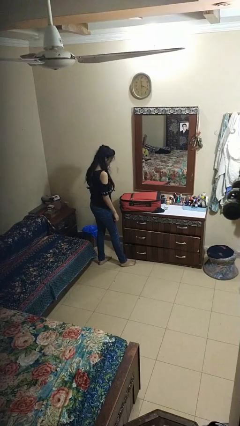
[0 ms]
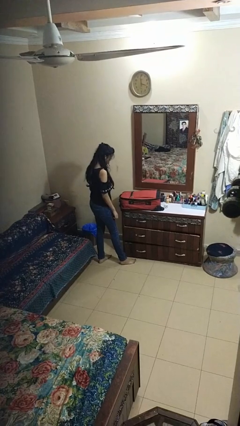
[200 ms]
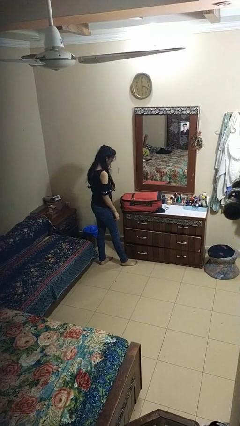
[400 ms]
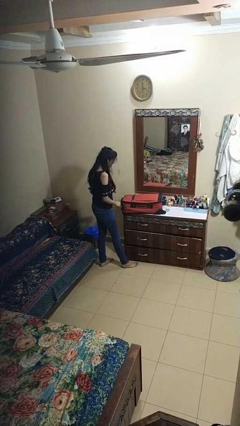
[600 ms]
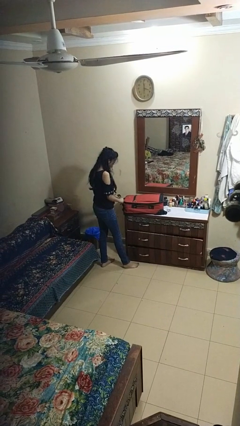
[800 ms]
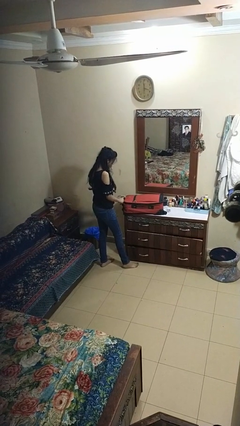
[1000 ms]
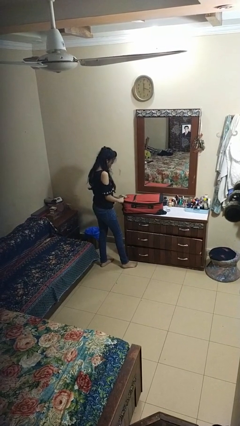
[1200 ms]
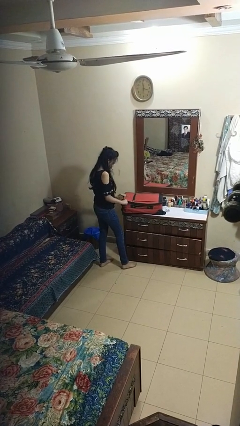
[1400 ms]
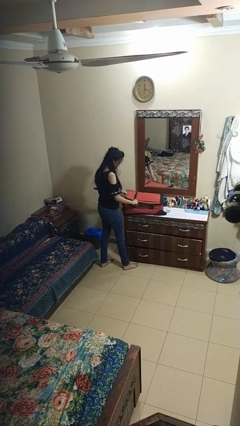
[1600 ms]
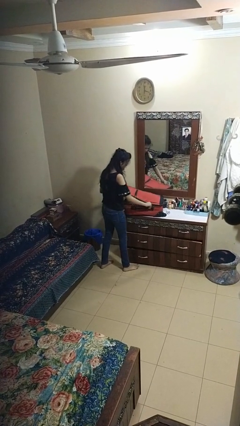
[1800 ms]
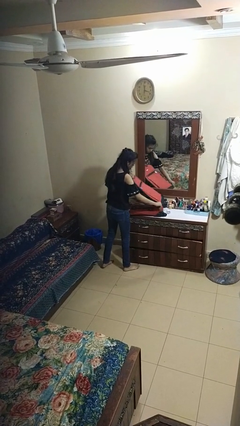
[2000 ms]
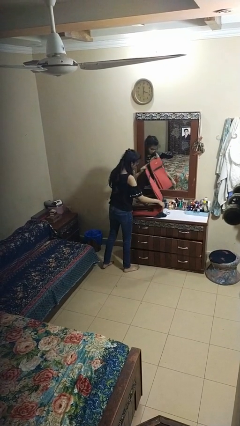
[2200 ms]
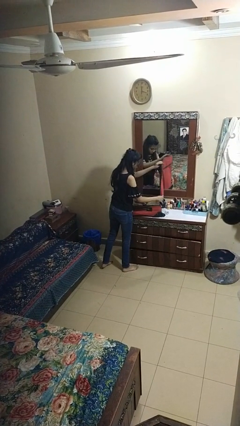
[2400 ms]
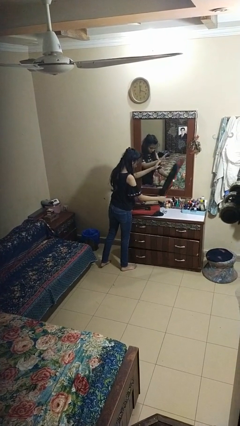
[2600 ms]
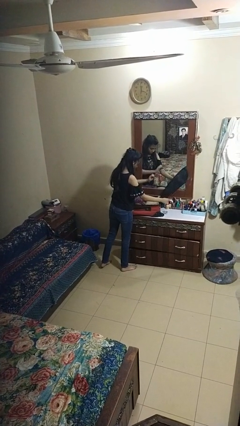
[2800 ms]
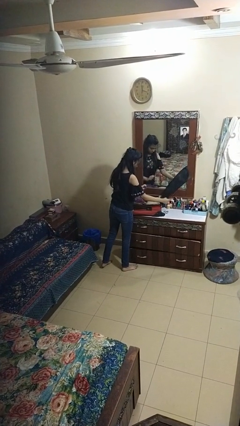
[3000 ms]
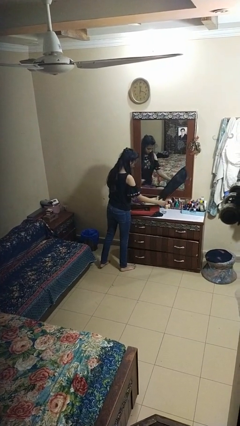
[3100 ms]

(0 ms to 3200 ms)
person opens suitcase

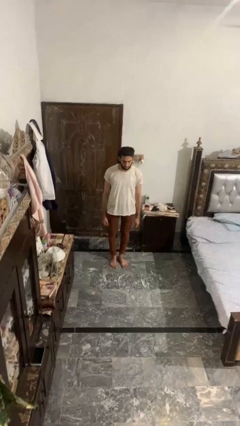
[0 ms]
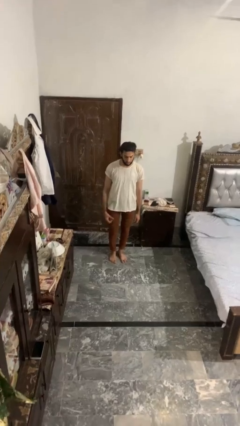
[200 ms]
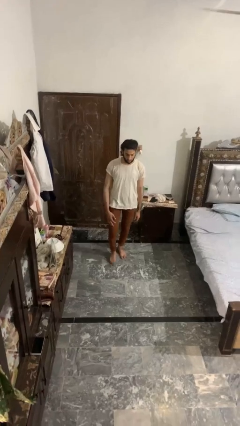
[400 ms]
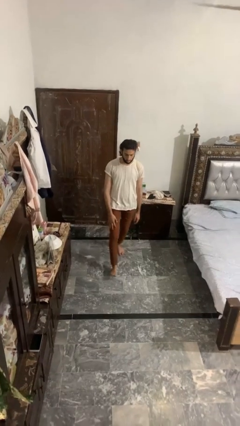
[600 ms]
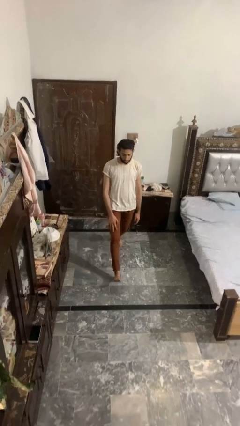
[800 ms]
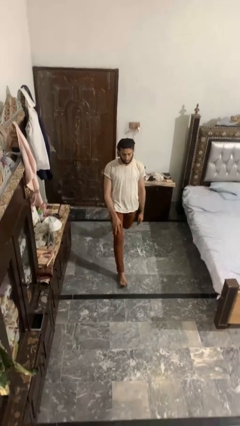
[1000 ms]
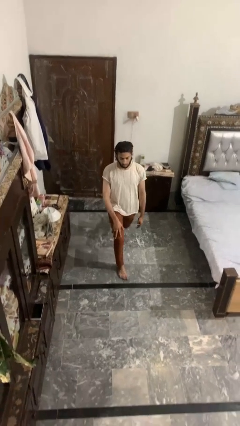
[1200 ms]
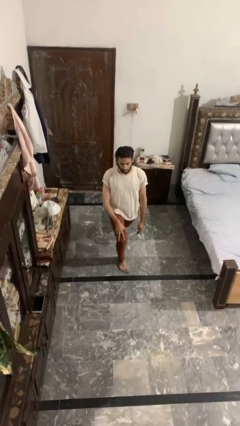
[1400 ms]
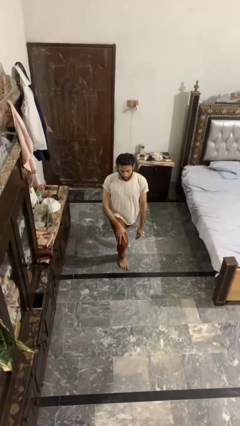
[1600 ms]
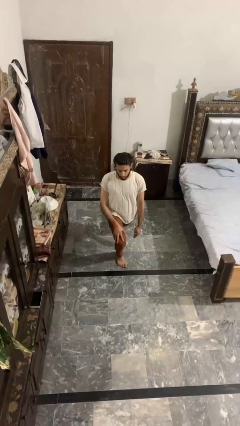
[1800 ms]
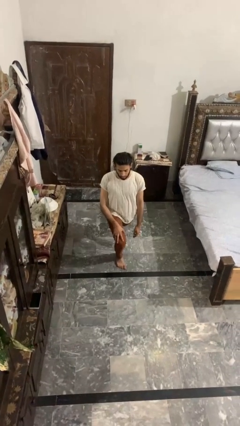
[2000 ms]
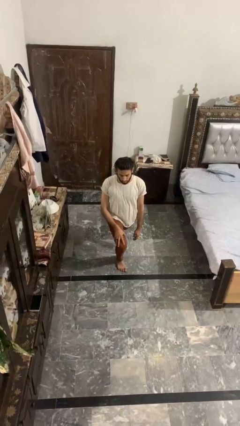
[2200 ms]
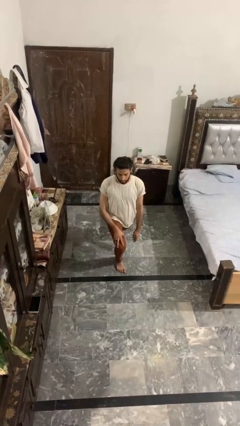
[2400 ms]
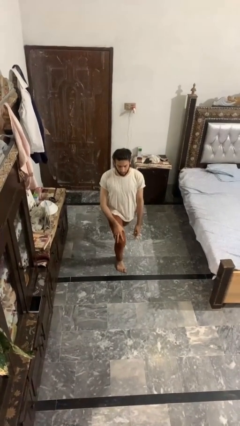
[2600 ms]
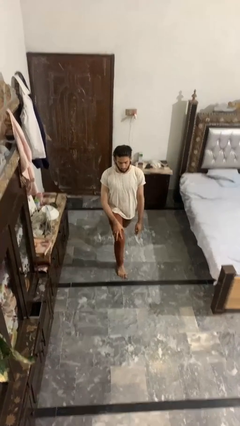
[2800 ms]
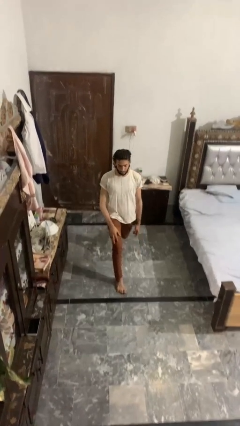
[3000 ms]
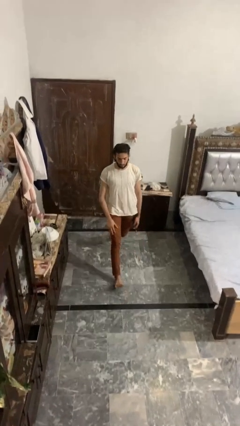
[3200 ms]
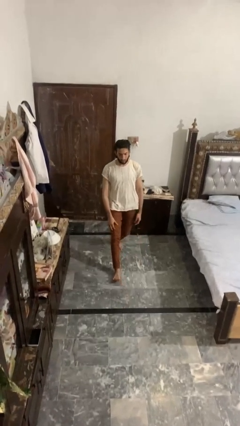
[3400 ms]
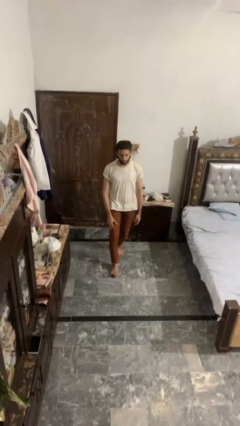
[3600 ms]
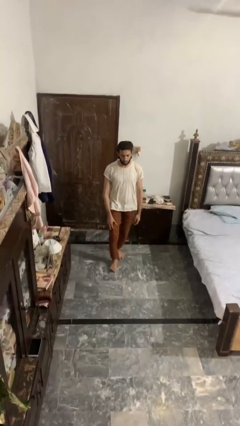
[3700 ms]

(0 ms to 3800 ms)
person exercises with lunges

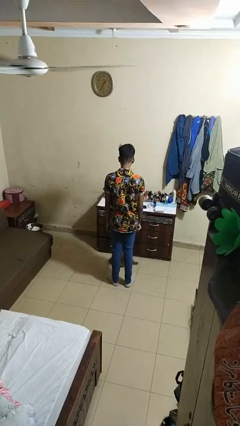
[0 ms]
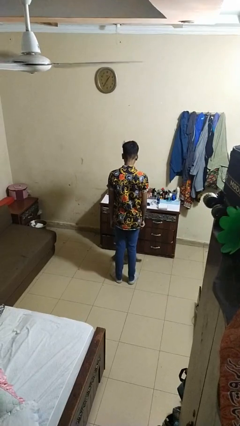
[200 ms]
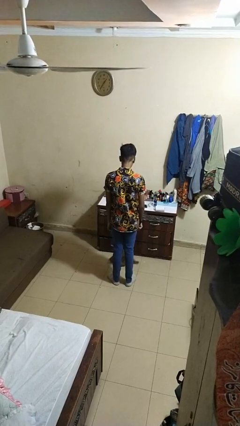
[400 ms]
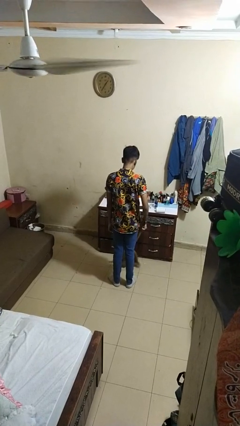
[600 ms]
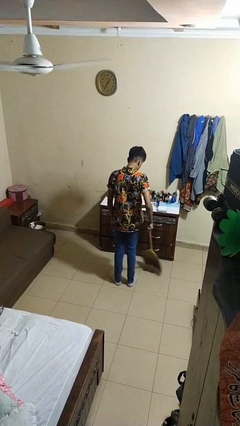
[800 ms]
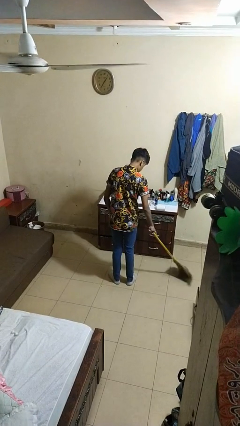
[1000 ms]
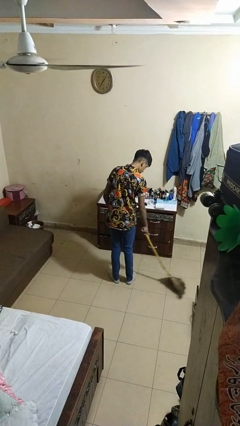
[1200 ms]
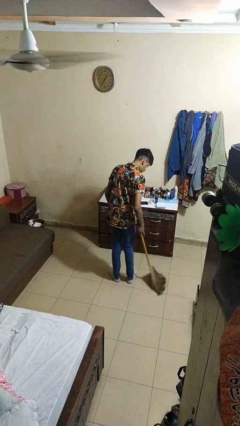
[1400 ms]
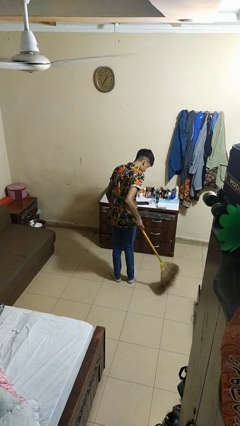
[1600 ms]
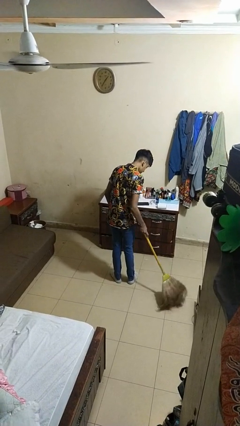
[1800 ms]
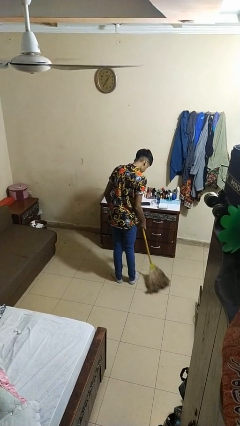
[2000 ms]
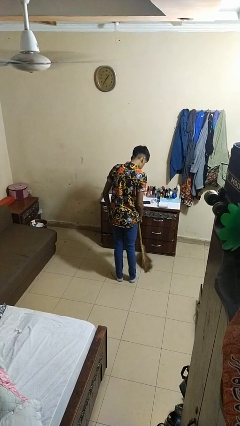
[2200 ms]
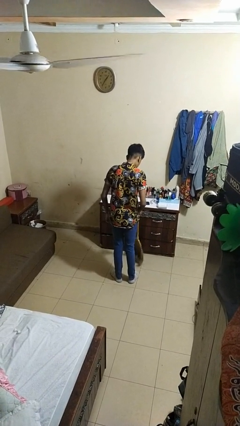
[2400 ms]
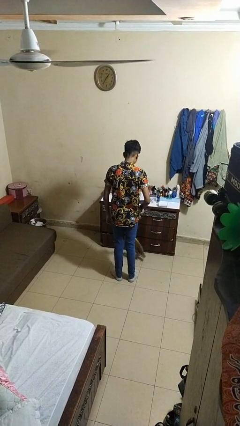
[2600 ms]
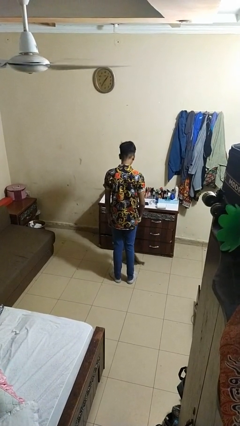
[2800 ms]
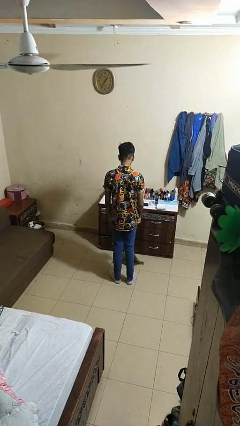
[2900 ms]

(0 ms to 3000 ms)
person sweeps floor

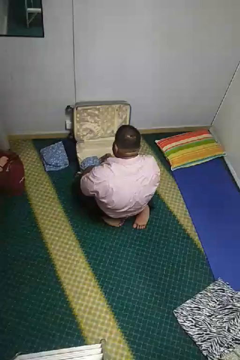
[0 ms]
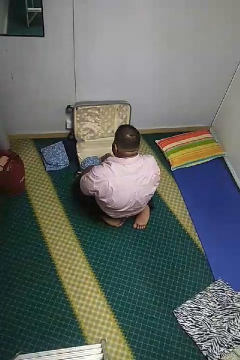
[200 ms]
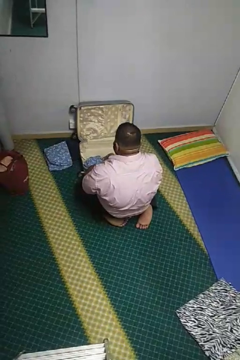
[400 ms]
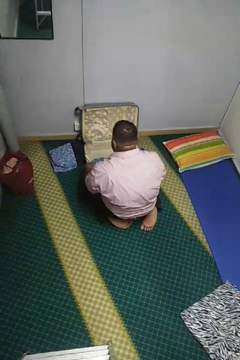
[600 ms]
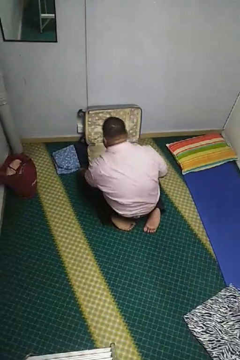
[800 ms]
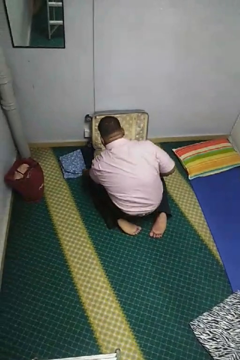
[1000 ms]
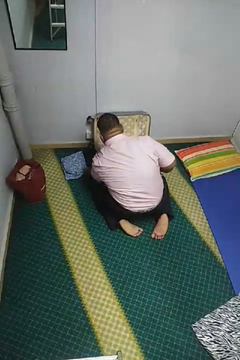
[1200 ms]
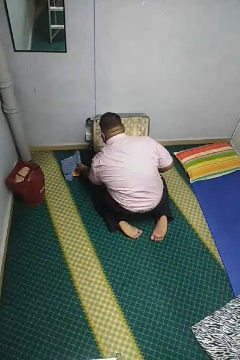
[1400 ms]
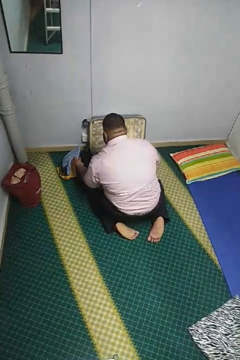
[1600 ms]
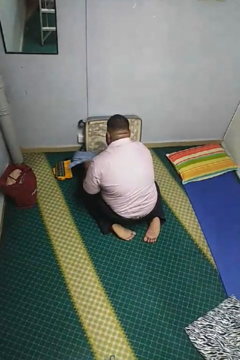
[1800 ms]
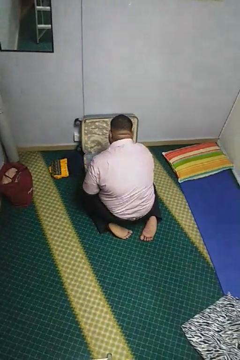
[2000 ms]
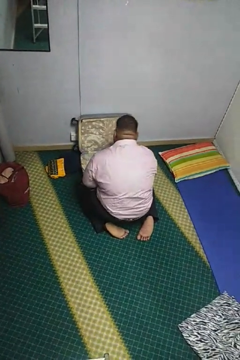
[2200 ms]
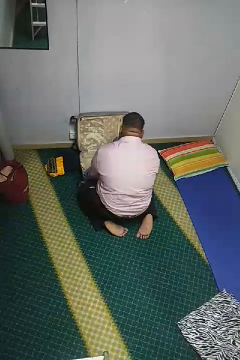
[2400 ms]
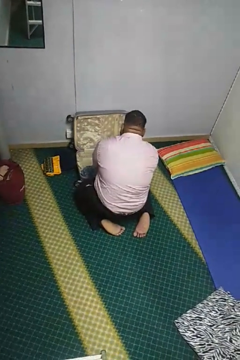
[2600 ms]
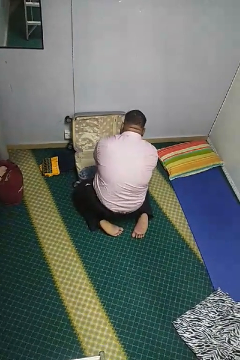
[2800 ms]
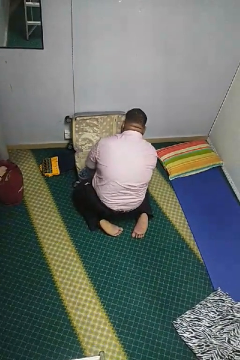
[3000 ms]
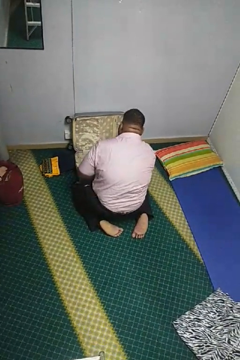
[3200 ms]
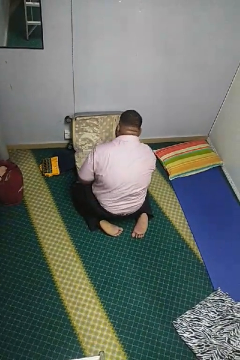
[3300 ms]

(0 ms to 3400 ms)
person loads clothes into suitcase

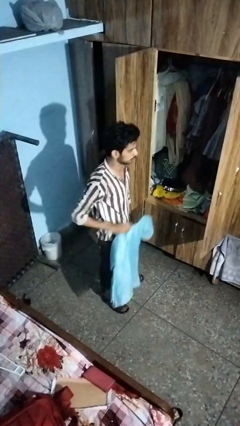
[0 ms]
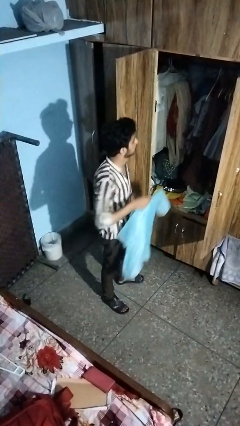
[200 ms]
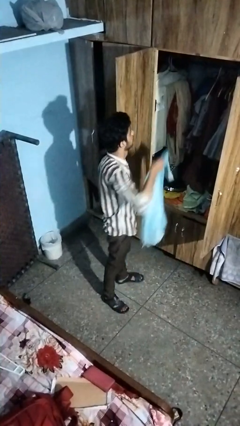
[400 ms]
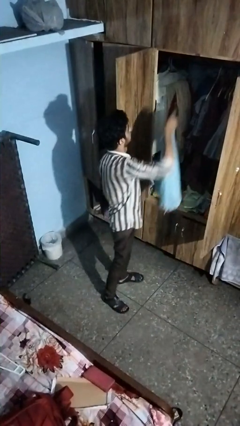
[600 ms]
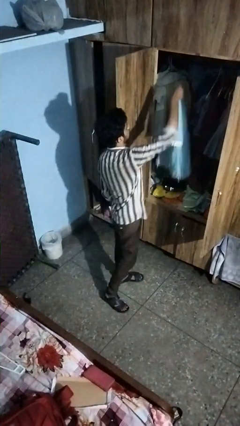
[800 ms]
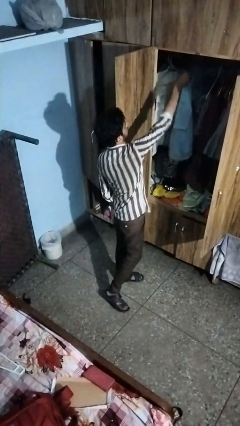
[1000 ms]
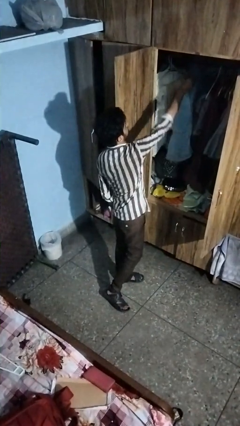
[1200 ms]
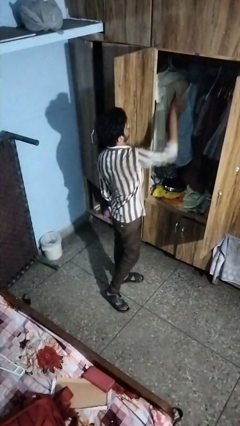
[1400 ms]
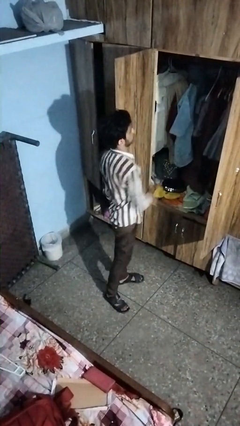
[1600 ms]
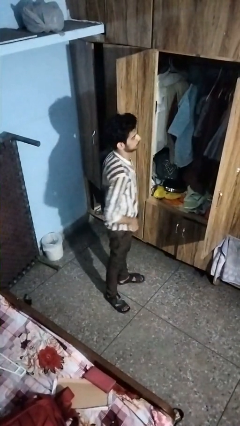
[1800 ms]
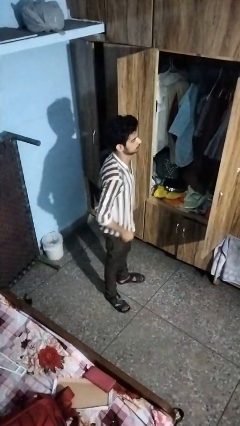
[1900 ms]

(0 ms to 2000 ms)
person puts clothes into closet

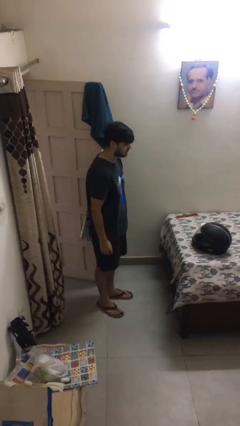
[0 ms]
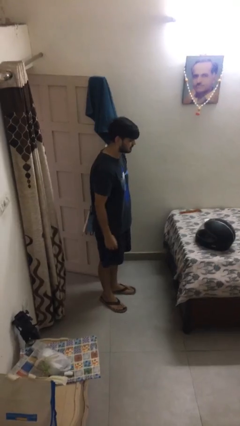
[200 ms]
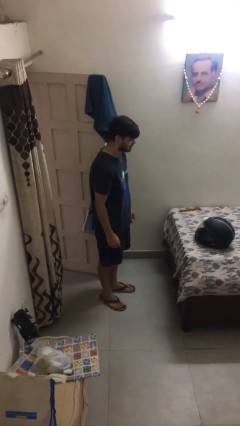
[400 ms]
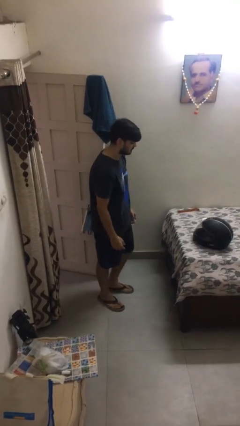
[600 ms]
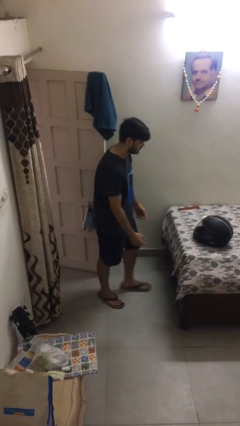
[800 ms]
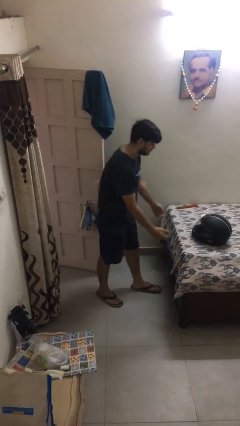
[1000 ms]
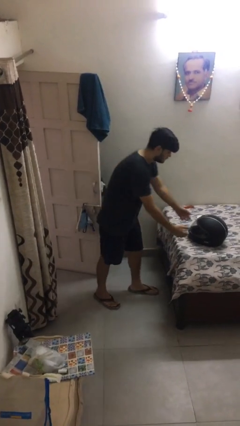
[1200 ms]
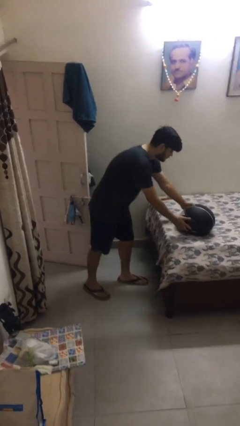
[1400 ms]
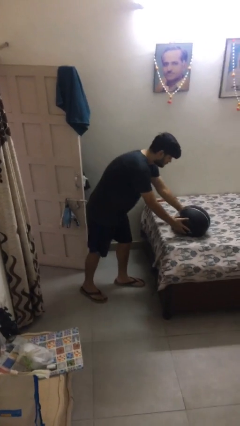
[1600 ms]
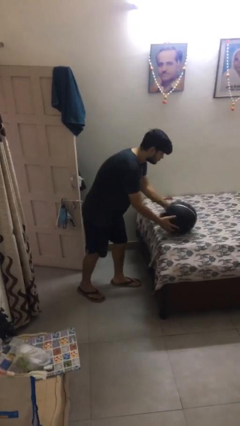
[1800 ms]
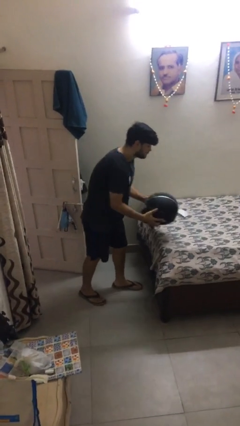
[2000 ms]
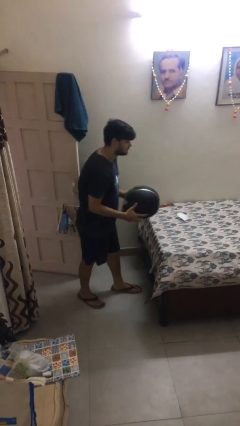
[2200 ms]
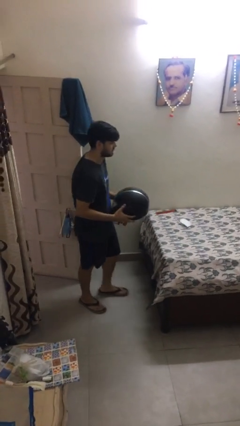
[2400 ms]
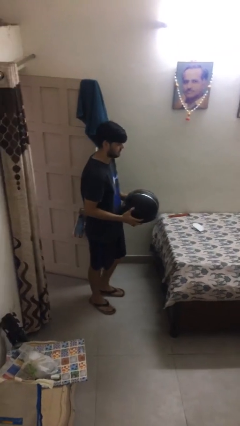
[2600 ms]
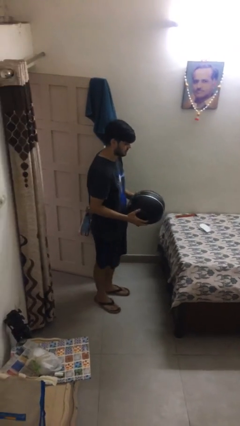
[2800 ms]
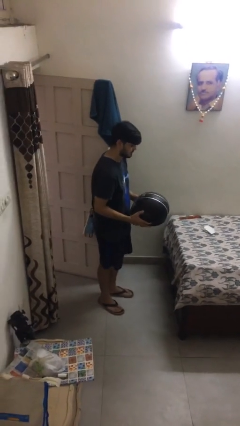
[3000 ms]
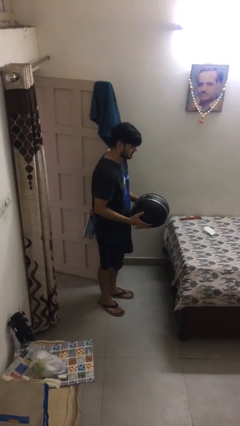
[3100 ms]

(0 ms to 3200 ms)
person picks up object from bed
